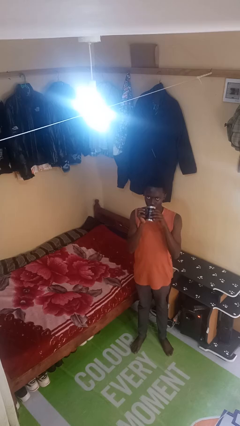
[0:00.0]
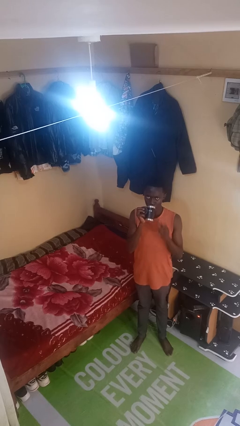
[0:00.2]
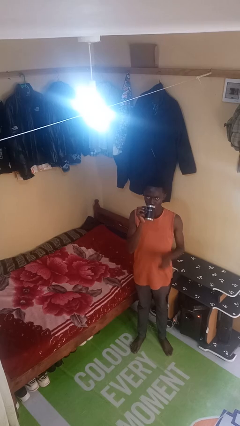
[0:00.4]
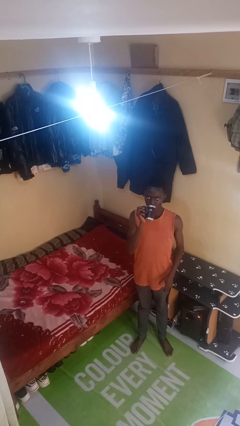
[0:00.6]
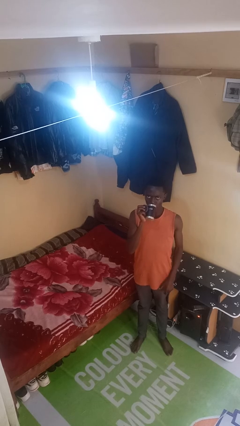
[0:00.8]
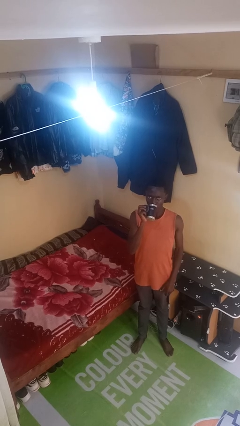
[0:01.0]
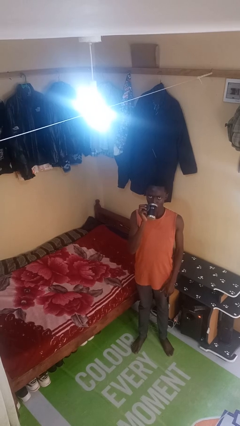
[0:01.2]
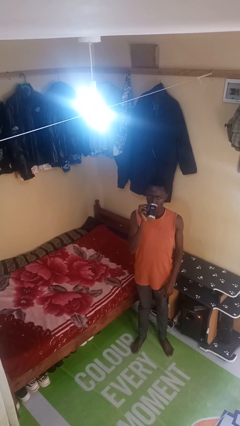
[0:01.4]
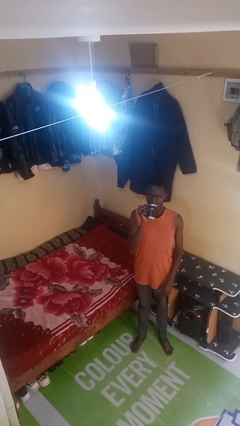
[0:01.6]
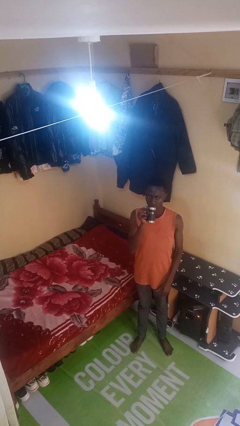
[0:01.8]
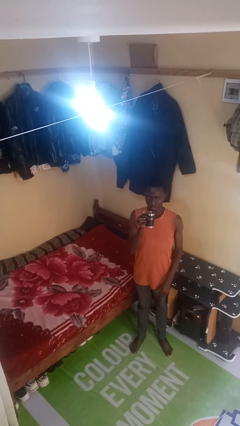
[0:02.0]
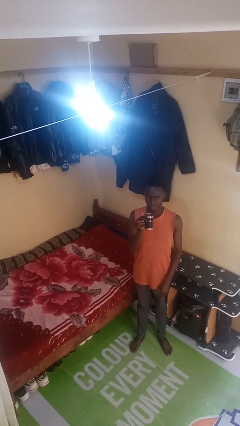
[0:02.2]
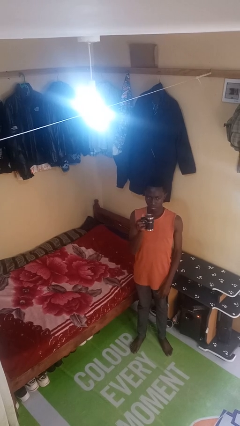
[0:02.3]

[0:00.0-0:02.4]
person drinks from beverage can

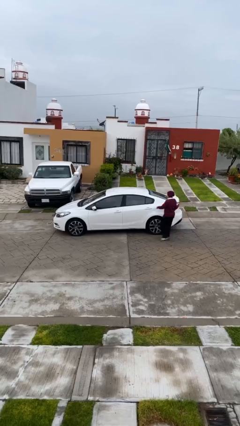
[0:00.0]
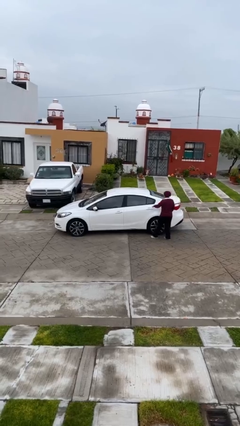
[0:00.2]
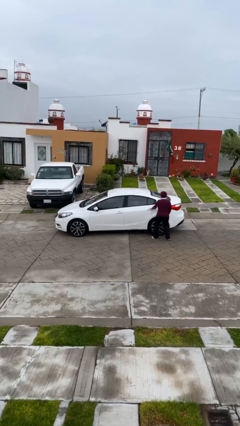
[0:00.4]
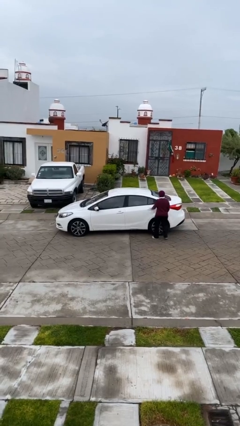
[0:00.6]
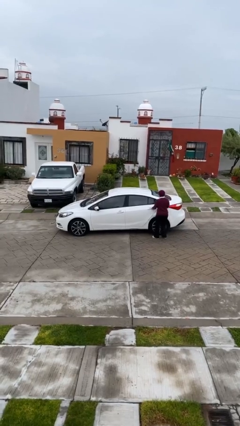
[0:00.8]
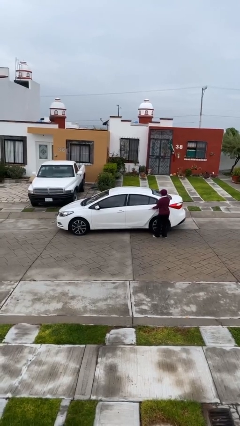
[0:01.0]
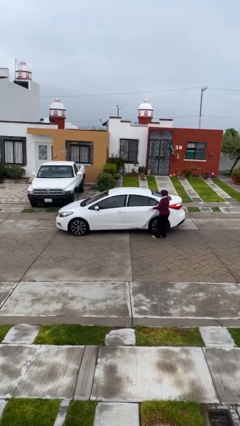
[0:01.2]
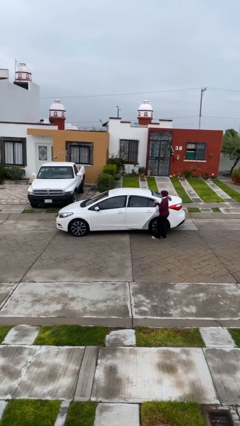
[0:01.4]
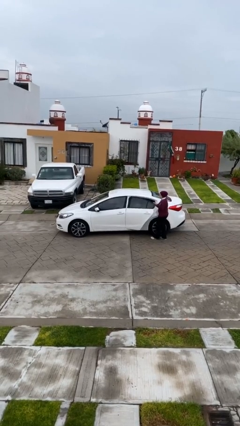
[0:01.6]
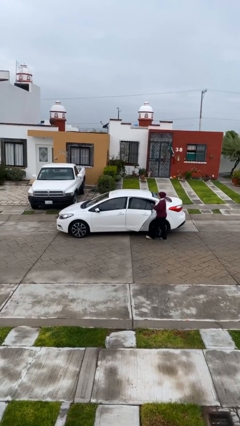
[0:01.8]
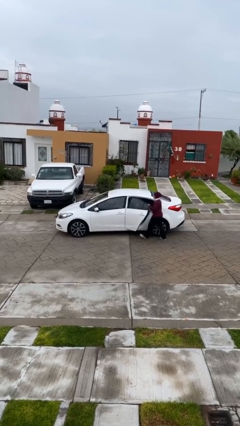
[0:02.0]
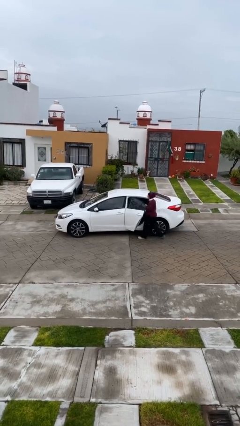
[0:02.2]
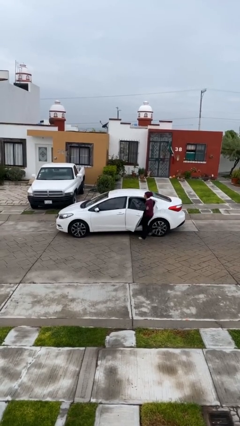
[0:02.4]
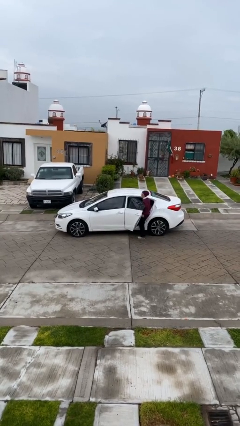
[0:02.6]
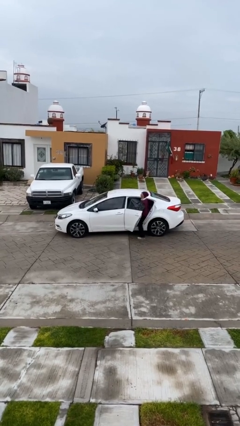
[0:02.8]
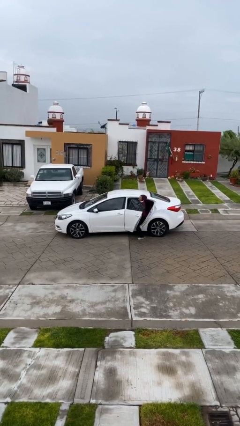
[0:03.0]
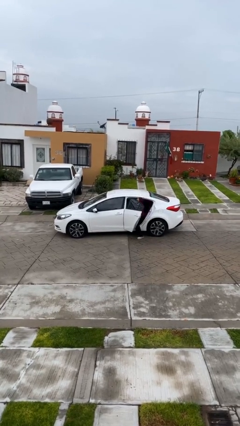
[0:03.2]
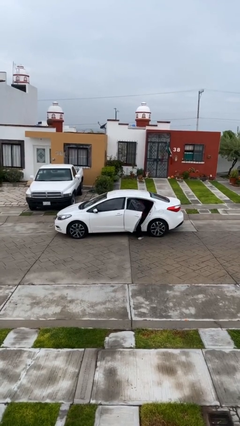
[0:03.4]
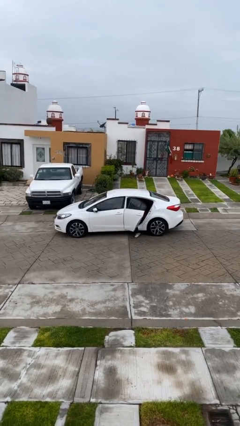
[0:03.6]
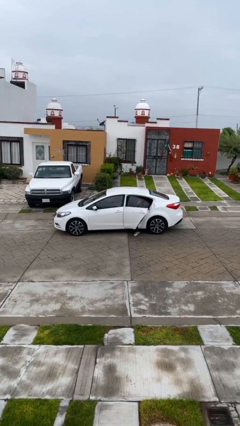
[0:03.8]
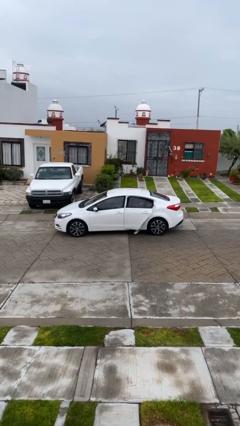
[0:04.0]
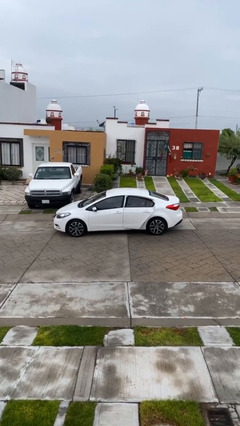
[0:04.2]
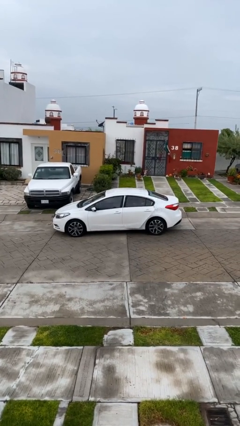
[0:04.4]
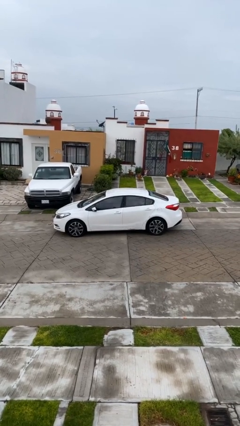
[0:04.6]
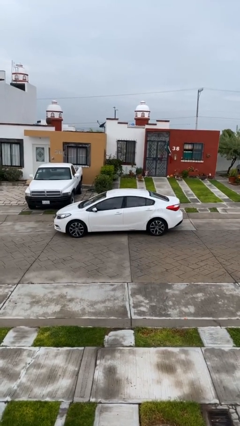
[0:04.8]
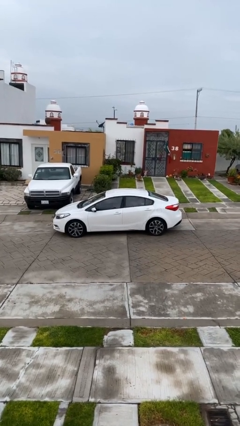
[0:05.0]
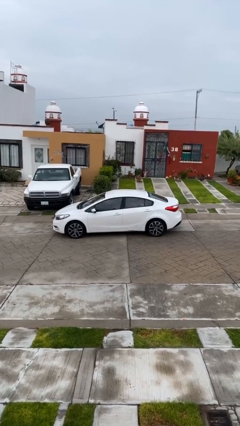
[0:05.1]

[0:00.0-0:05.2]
car picks up person

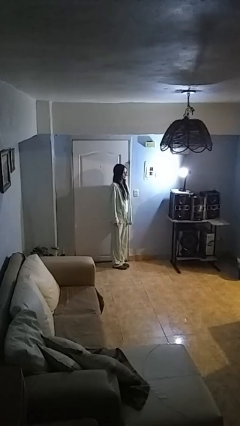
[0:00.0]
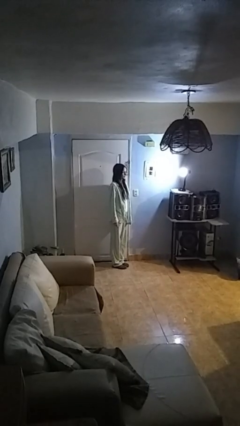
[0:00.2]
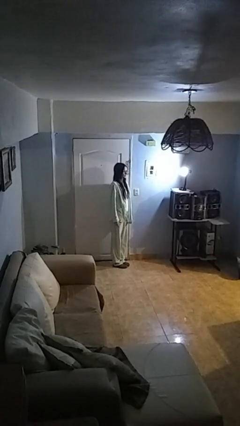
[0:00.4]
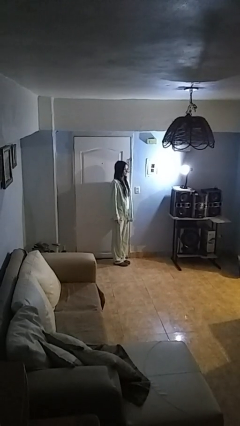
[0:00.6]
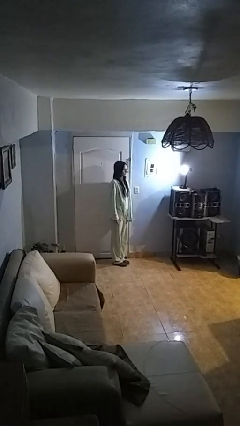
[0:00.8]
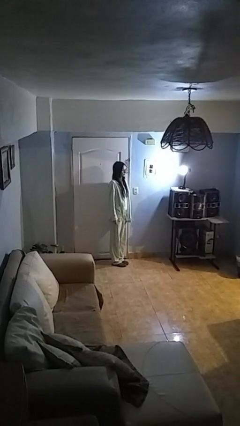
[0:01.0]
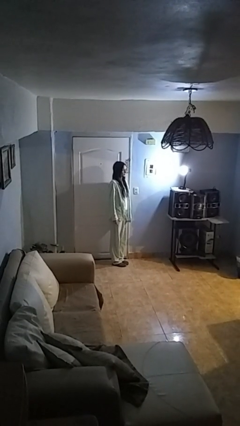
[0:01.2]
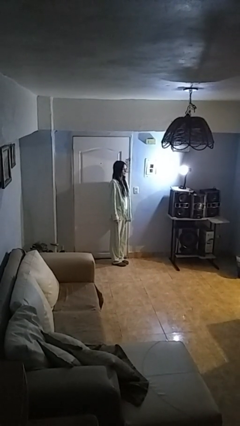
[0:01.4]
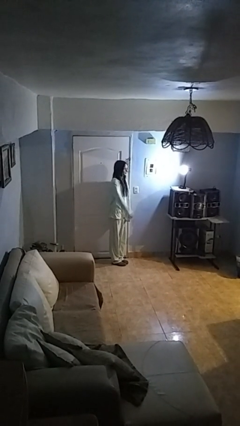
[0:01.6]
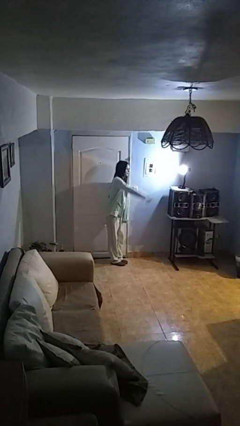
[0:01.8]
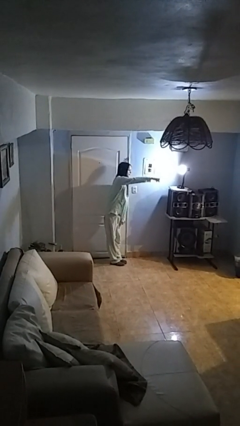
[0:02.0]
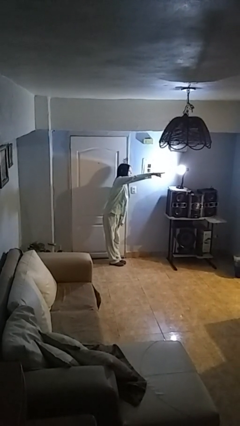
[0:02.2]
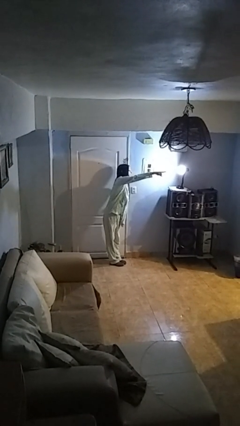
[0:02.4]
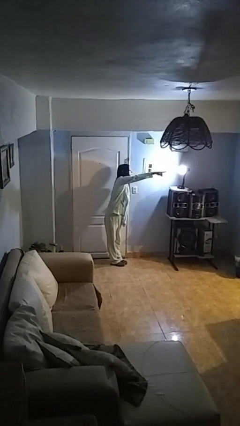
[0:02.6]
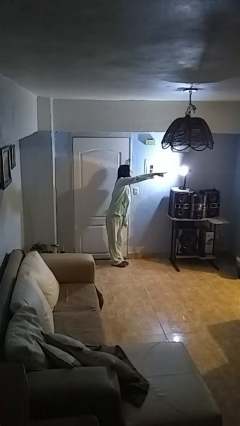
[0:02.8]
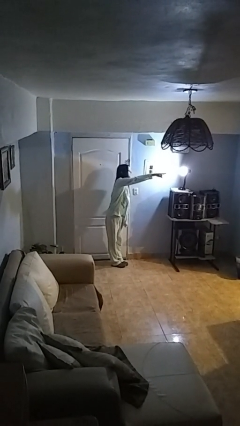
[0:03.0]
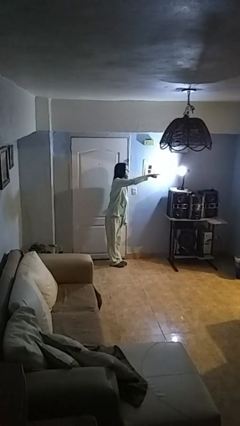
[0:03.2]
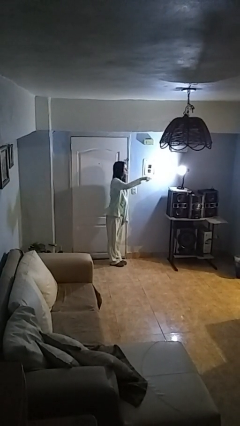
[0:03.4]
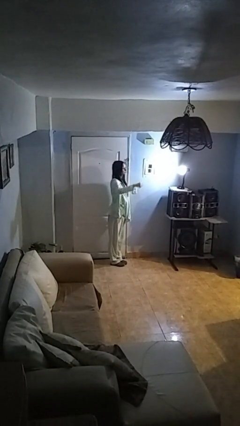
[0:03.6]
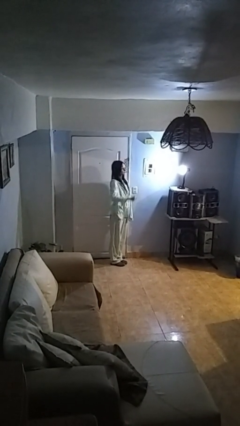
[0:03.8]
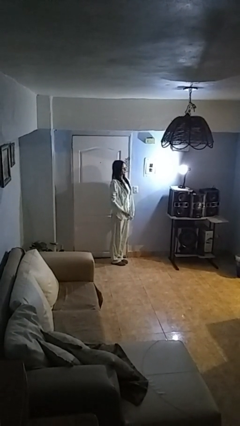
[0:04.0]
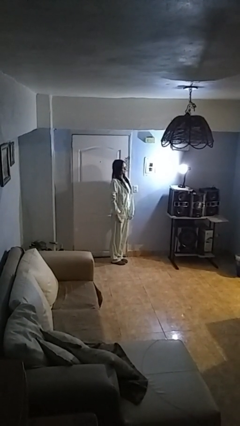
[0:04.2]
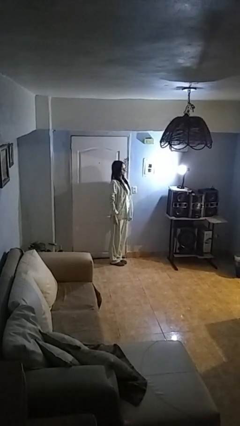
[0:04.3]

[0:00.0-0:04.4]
person points at person

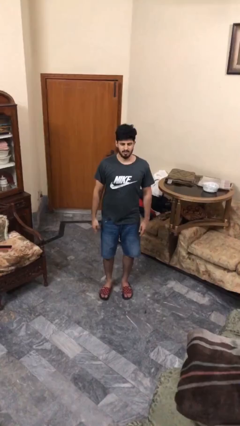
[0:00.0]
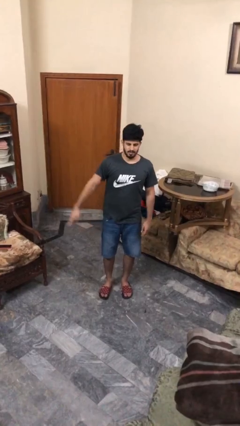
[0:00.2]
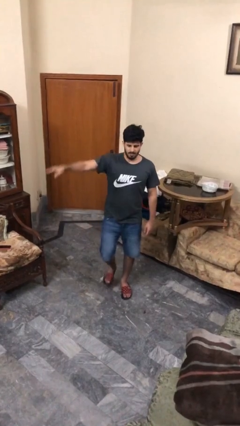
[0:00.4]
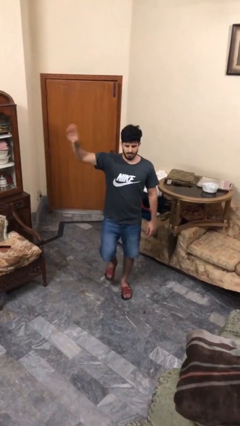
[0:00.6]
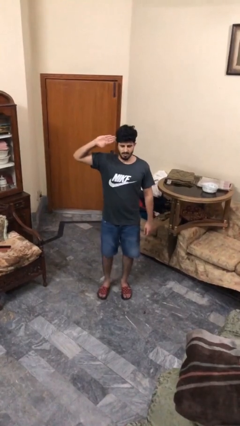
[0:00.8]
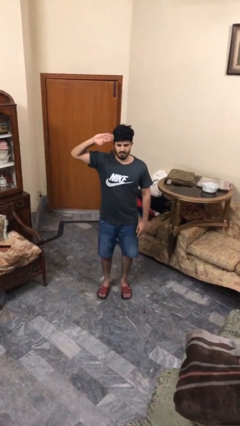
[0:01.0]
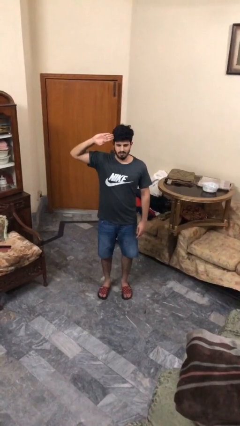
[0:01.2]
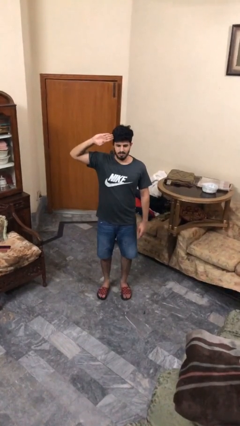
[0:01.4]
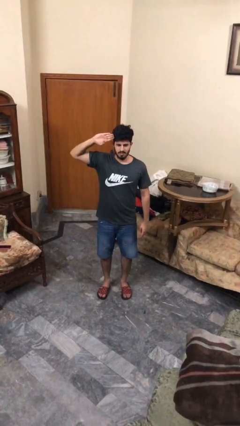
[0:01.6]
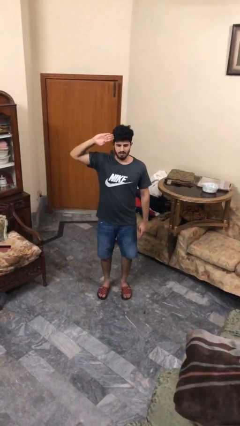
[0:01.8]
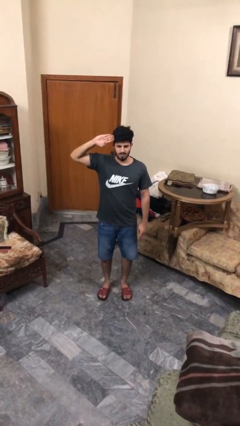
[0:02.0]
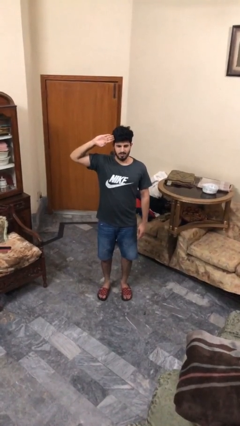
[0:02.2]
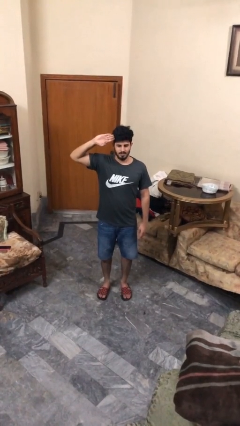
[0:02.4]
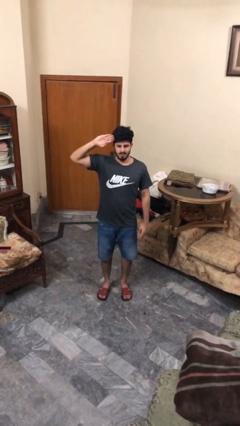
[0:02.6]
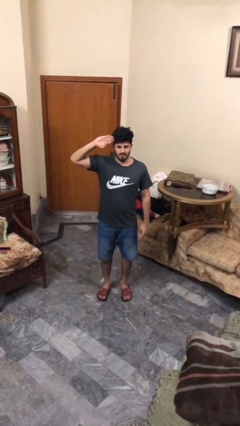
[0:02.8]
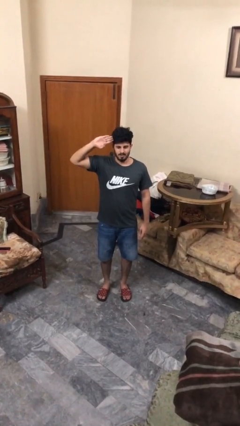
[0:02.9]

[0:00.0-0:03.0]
person salutes

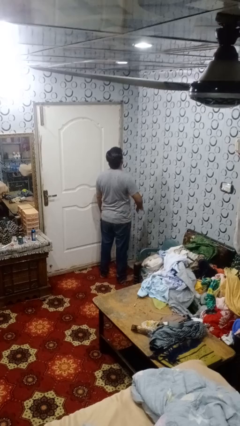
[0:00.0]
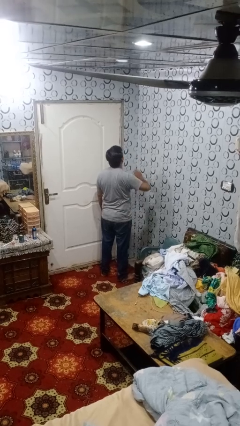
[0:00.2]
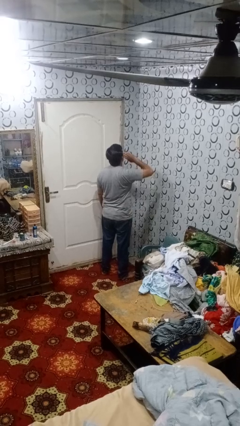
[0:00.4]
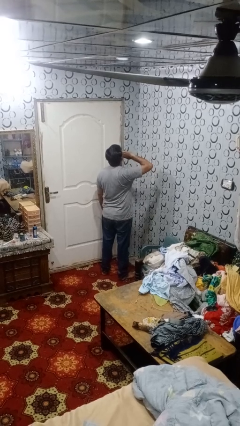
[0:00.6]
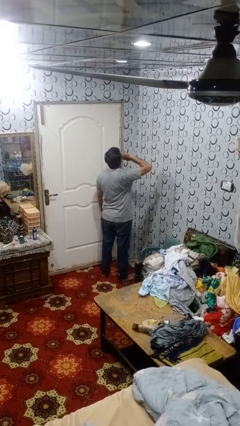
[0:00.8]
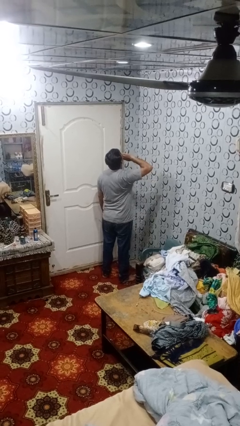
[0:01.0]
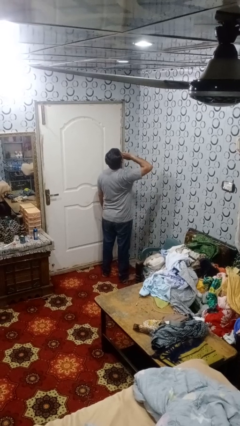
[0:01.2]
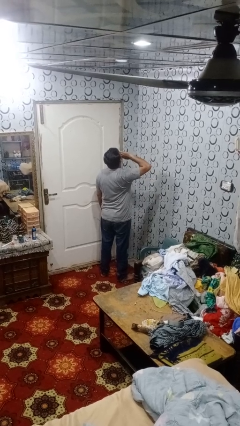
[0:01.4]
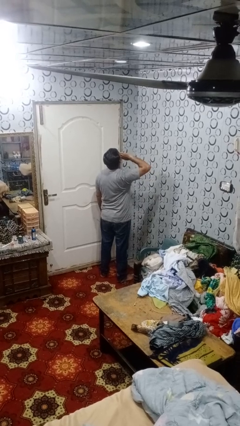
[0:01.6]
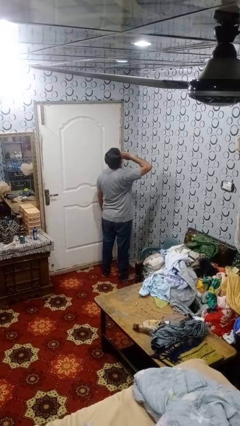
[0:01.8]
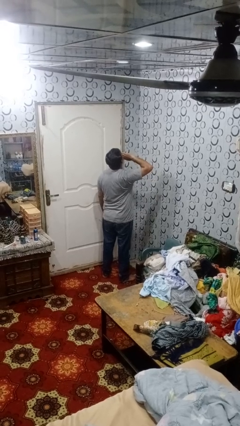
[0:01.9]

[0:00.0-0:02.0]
person yawns

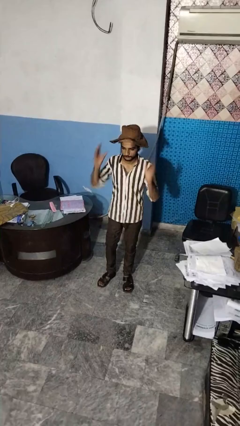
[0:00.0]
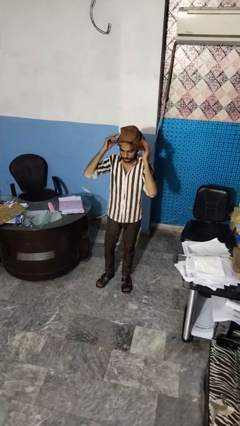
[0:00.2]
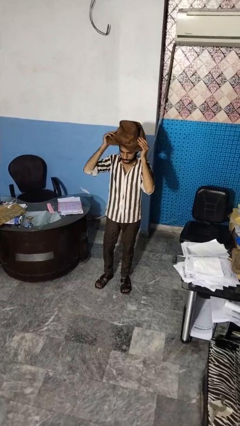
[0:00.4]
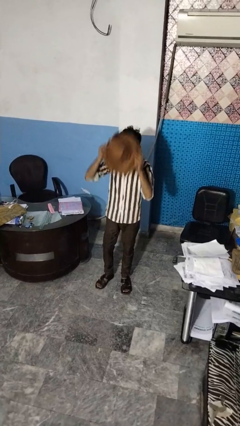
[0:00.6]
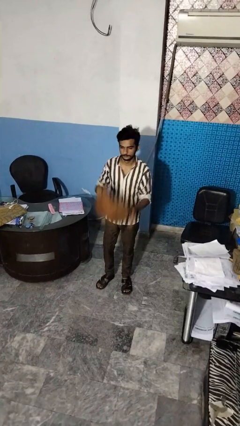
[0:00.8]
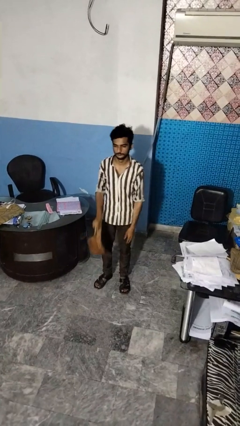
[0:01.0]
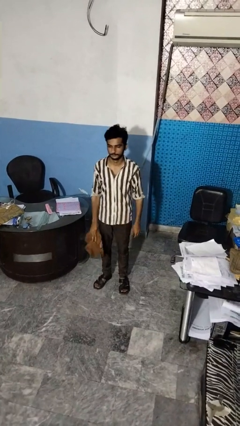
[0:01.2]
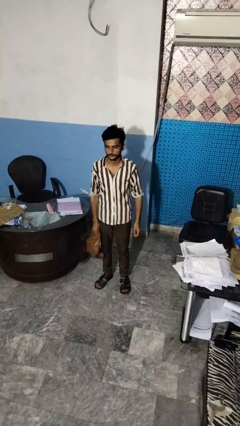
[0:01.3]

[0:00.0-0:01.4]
person takes off hat
